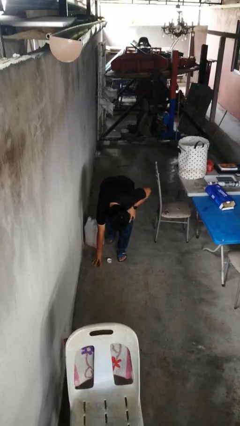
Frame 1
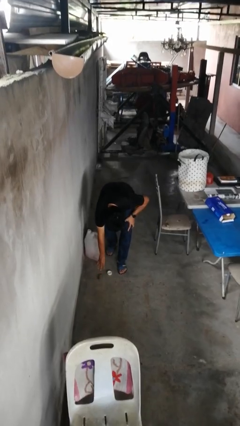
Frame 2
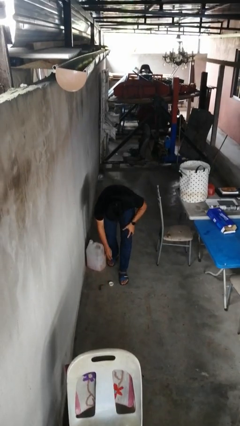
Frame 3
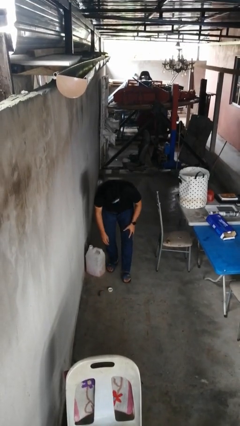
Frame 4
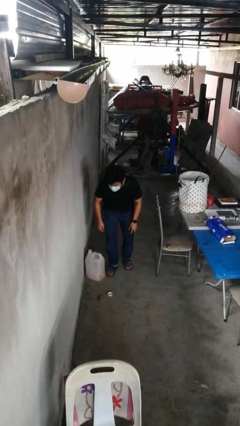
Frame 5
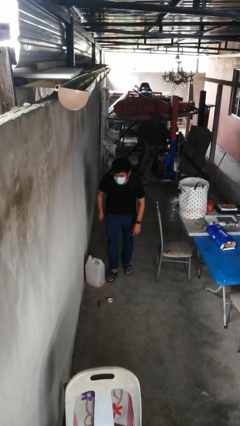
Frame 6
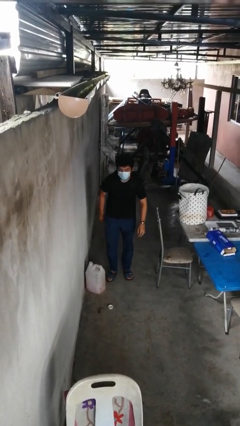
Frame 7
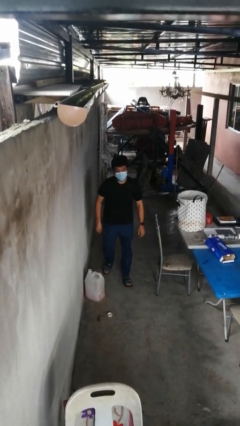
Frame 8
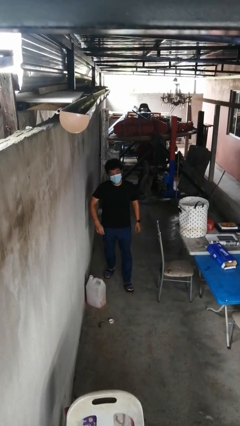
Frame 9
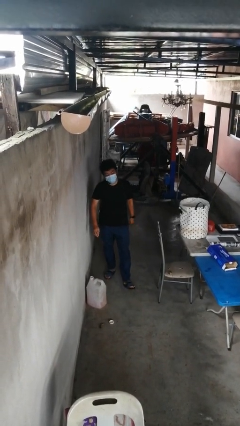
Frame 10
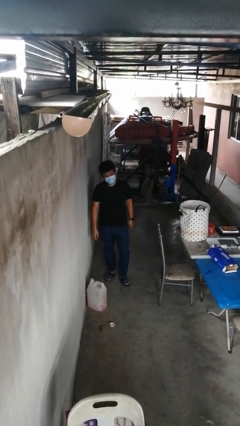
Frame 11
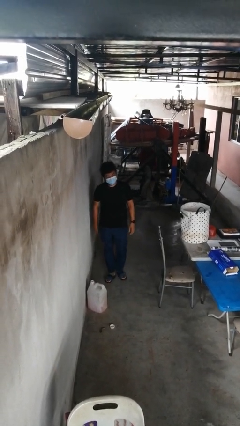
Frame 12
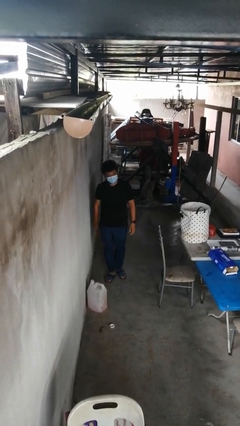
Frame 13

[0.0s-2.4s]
person stands up from floor

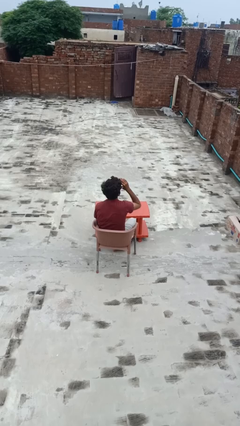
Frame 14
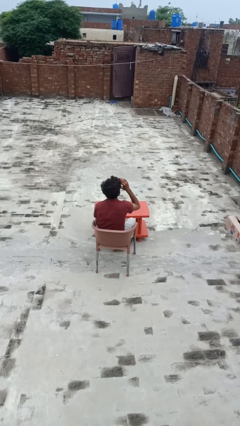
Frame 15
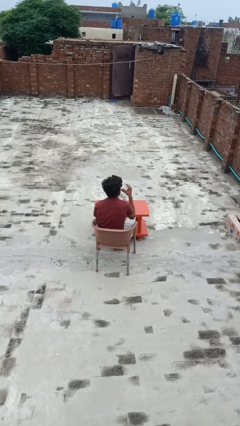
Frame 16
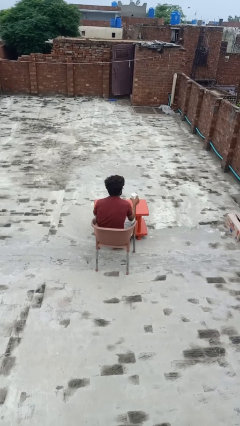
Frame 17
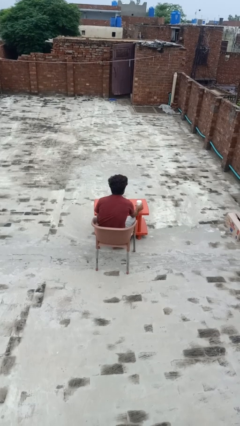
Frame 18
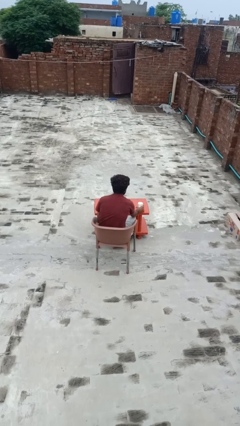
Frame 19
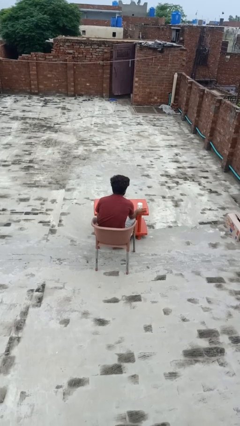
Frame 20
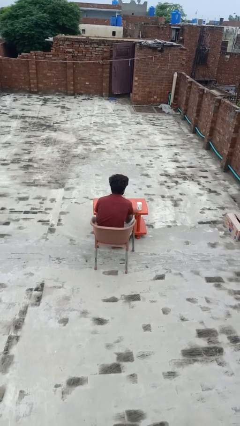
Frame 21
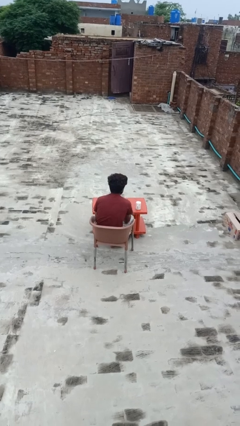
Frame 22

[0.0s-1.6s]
person drinks from mug

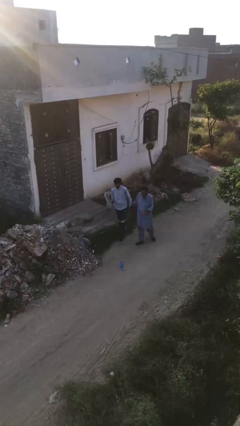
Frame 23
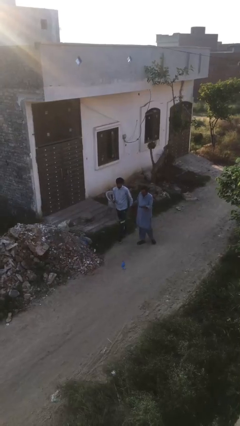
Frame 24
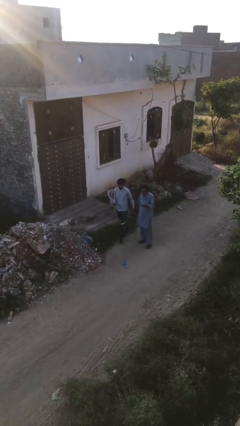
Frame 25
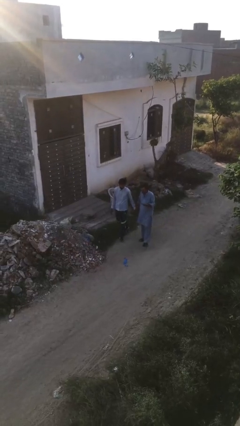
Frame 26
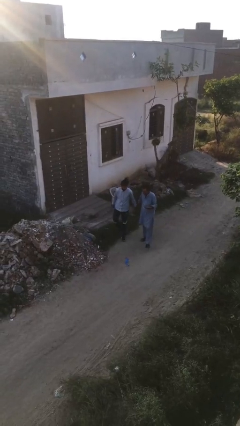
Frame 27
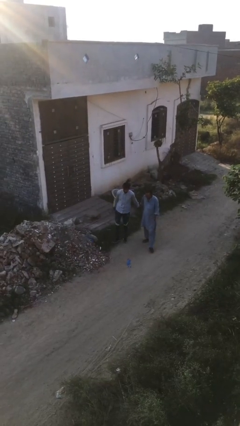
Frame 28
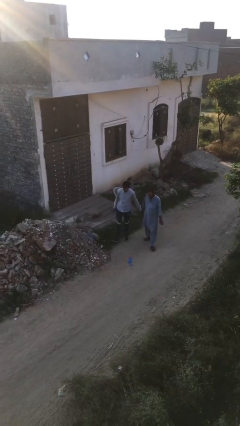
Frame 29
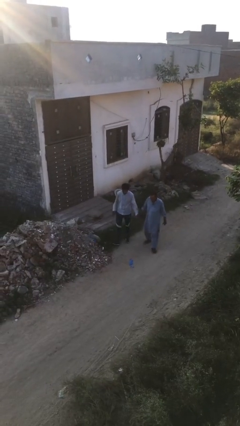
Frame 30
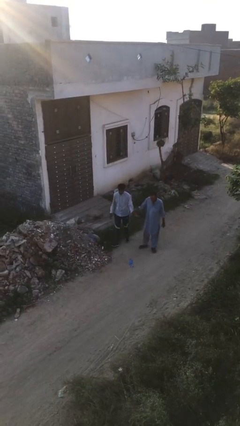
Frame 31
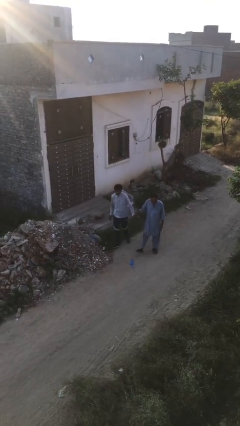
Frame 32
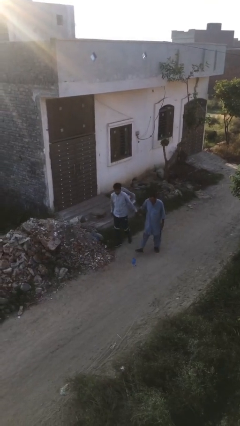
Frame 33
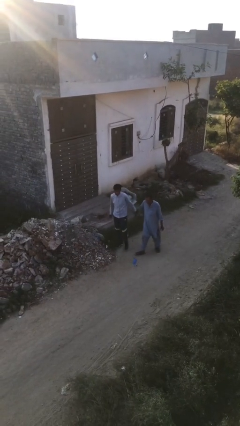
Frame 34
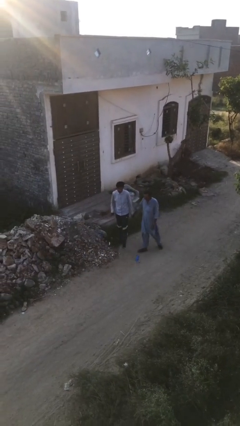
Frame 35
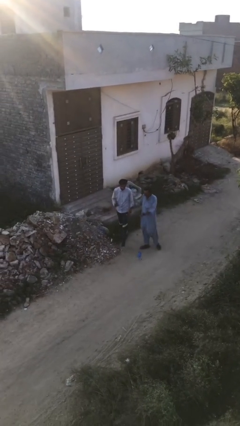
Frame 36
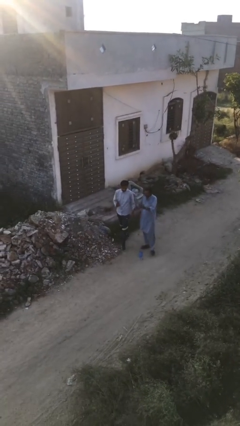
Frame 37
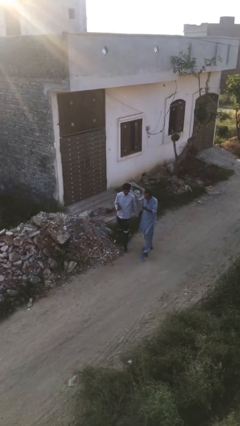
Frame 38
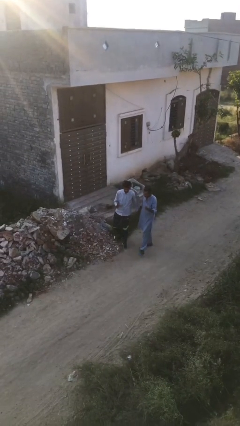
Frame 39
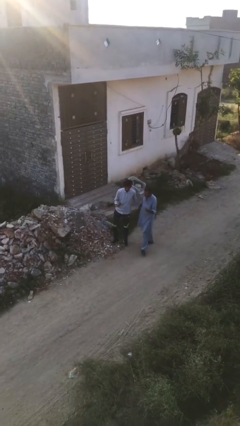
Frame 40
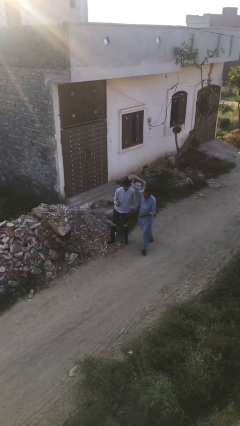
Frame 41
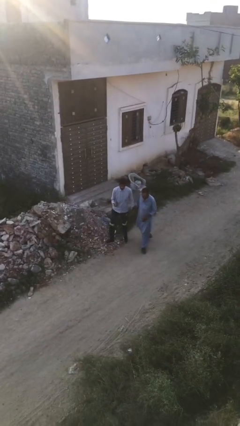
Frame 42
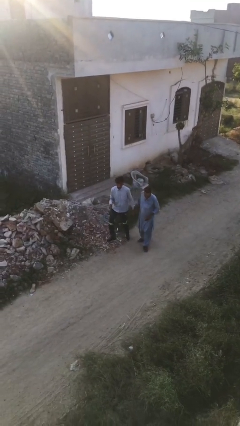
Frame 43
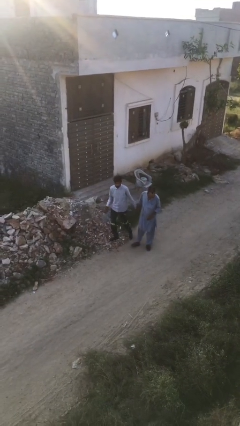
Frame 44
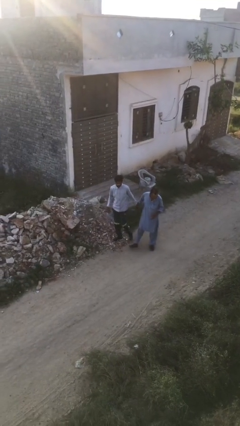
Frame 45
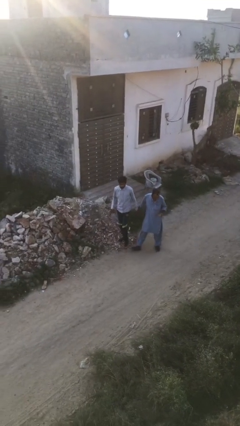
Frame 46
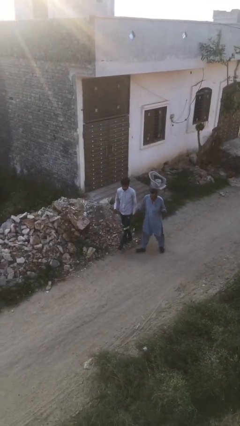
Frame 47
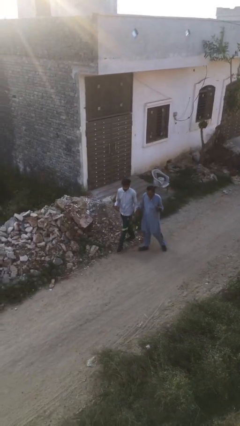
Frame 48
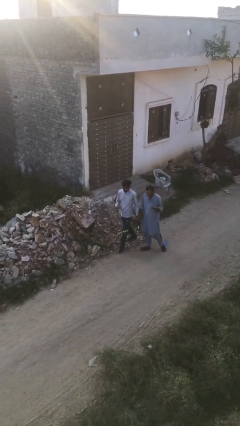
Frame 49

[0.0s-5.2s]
person holds hand

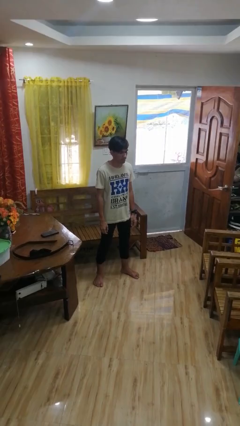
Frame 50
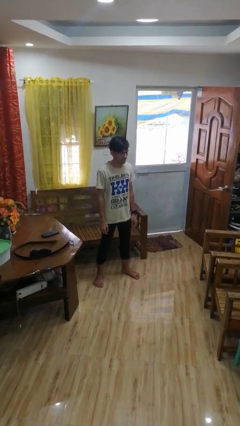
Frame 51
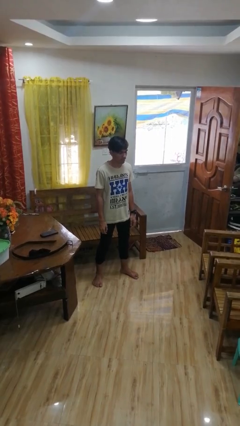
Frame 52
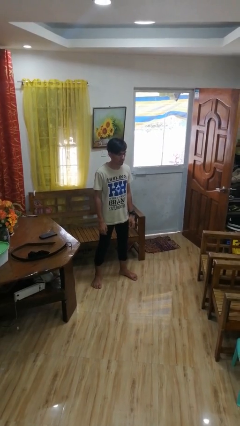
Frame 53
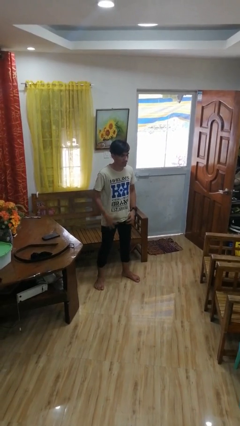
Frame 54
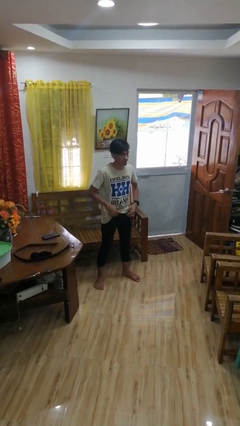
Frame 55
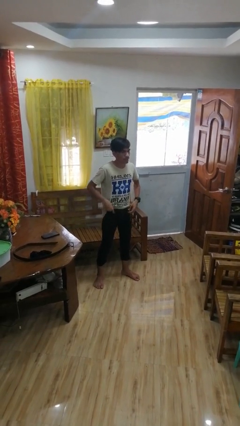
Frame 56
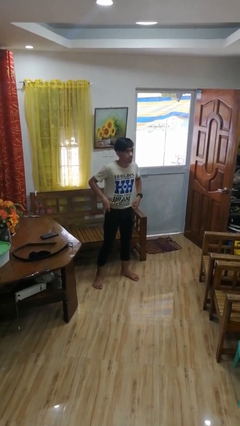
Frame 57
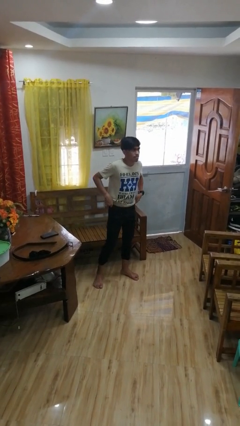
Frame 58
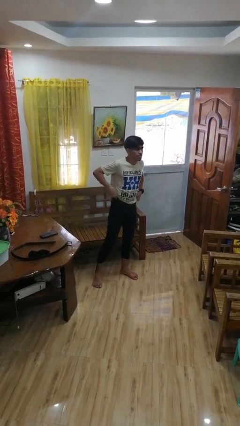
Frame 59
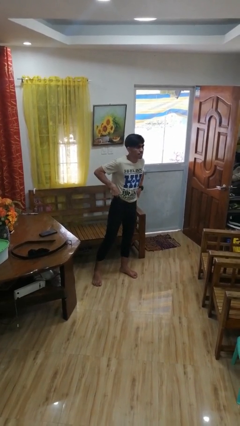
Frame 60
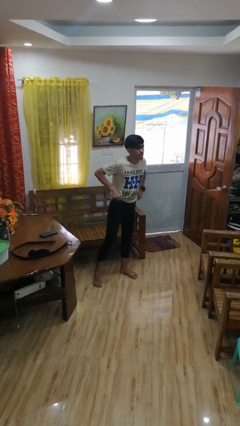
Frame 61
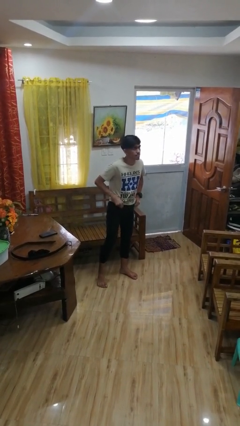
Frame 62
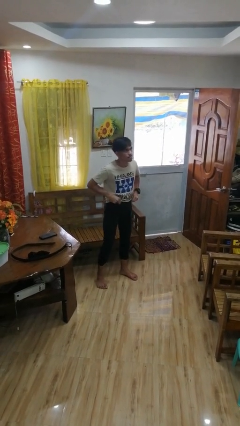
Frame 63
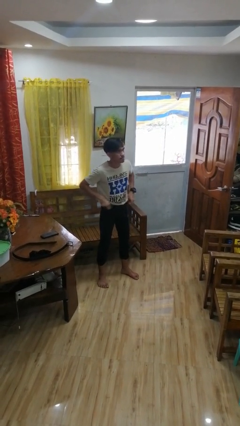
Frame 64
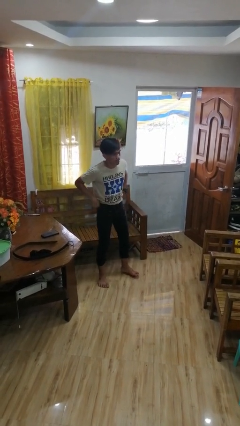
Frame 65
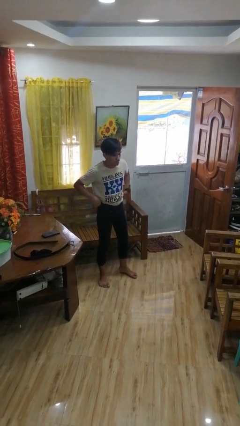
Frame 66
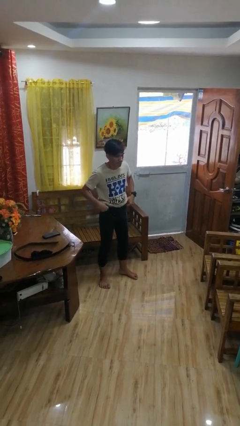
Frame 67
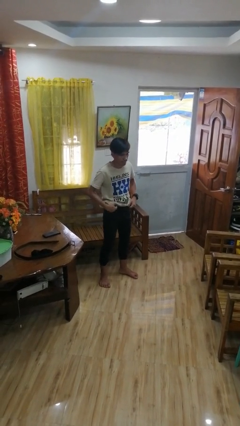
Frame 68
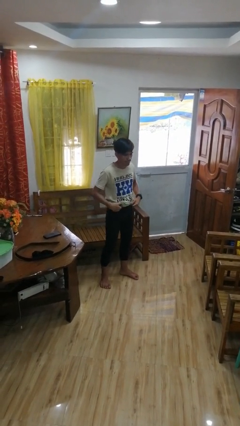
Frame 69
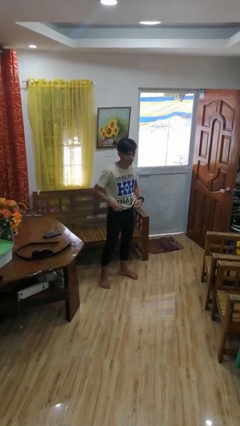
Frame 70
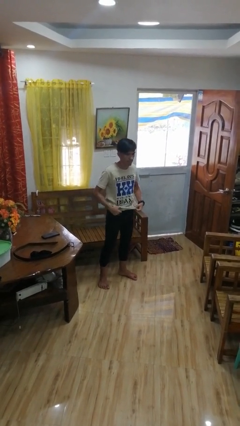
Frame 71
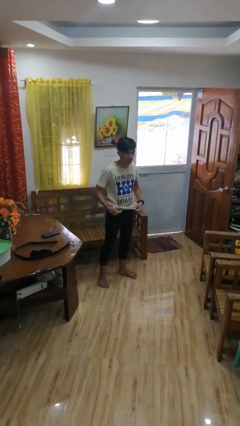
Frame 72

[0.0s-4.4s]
person hikes up pants

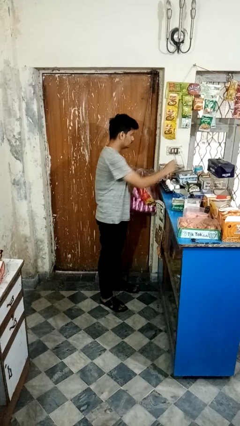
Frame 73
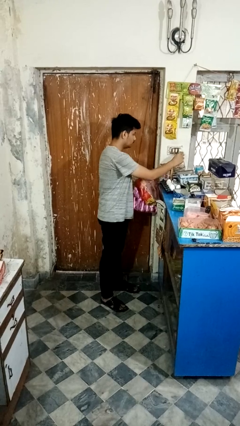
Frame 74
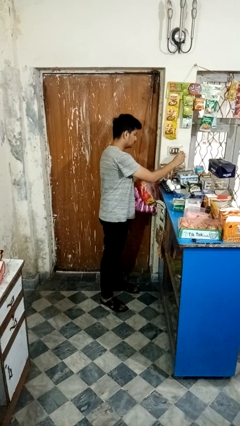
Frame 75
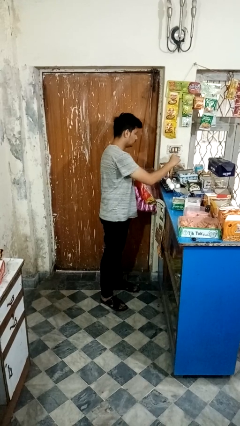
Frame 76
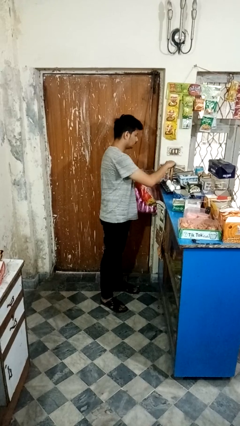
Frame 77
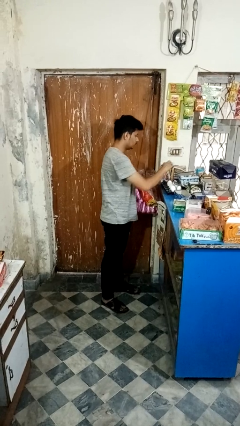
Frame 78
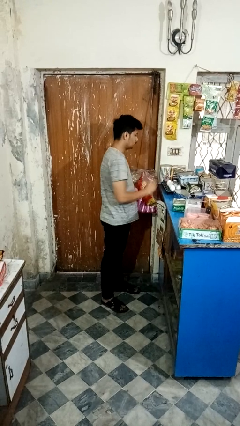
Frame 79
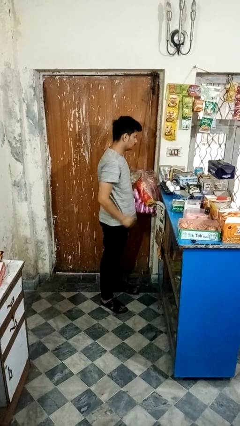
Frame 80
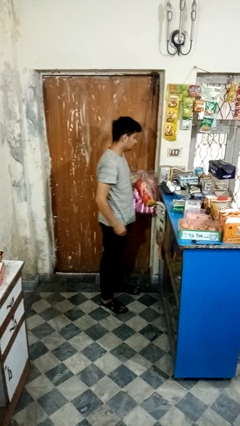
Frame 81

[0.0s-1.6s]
person unplugs from electrical socket

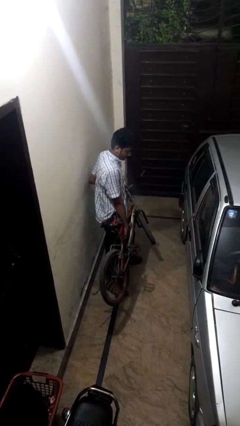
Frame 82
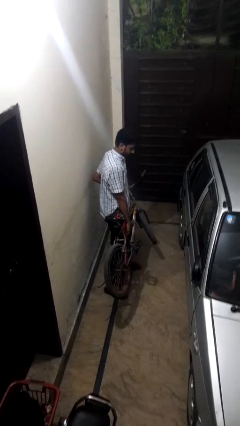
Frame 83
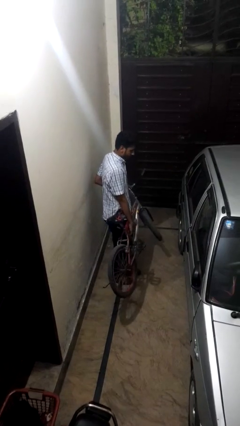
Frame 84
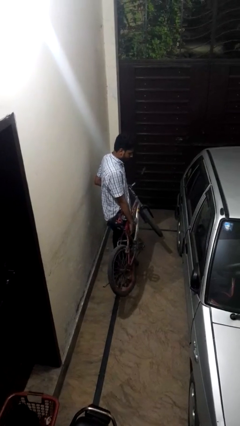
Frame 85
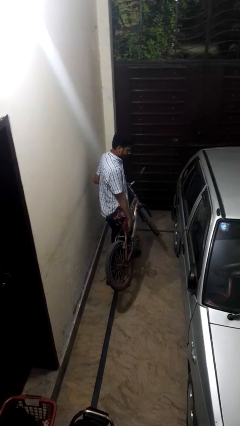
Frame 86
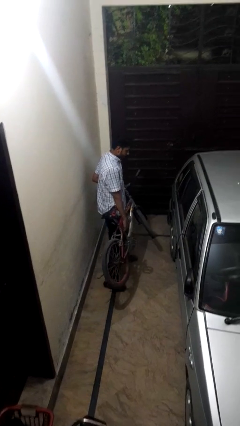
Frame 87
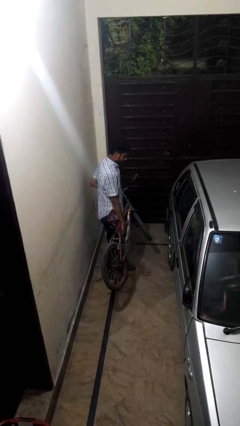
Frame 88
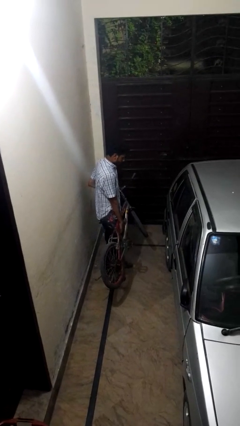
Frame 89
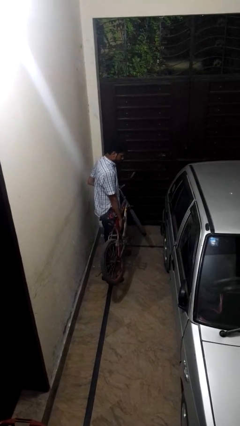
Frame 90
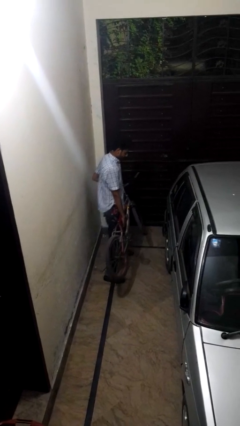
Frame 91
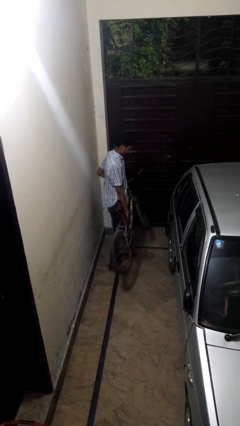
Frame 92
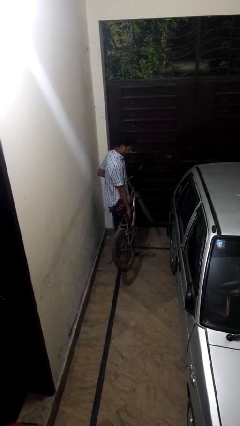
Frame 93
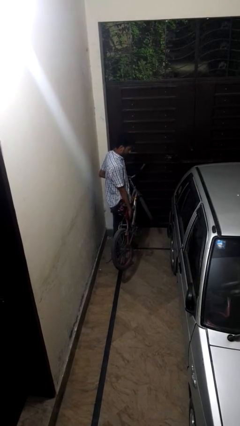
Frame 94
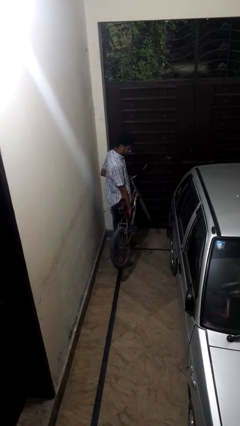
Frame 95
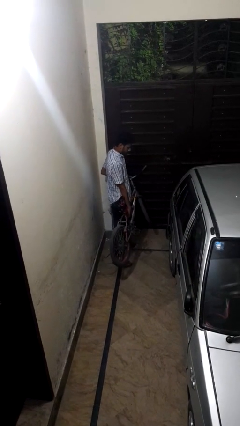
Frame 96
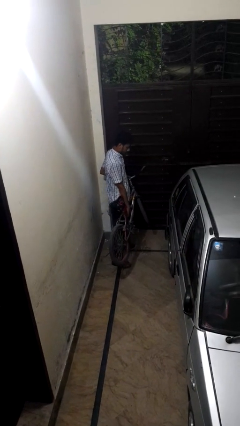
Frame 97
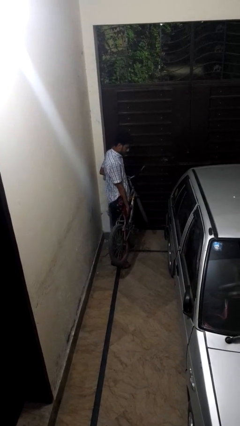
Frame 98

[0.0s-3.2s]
person carries groceries
